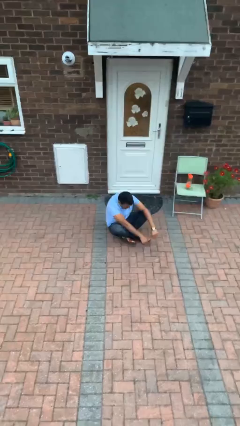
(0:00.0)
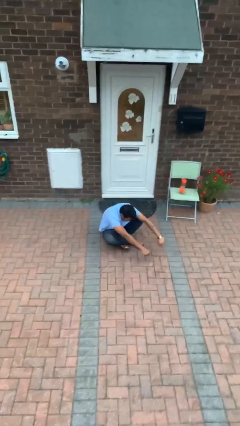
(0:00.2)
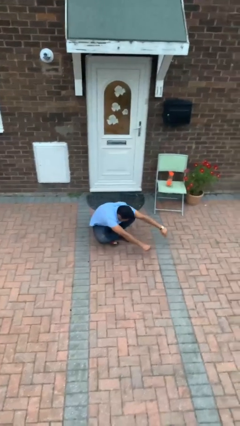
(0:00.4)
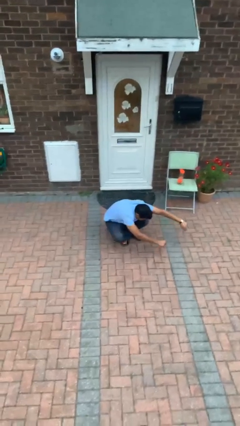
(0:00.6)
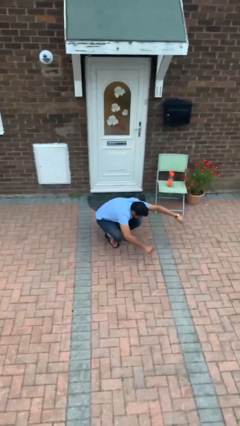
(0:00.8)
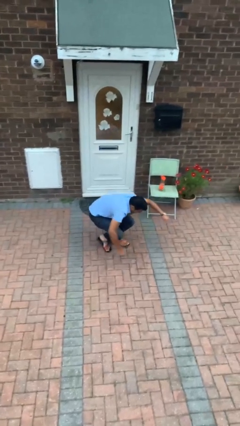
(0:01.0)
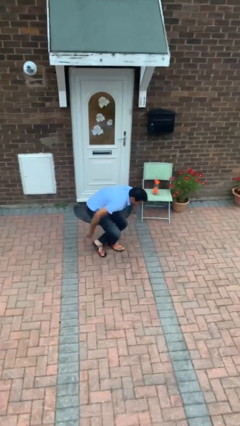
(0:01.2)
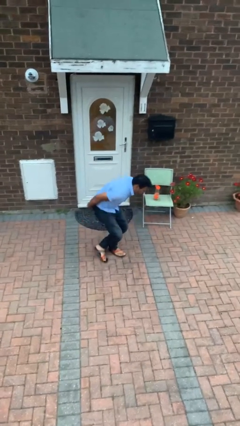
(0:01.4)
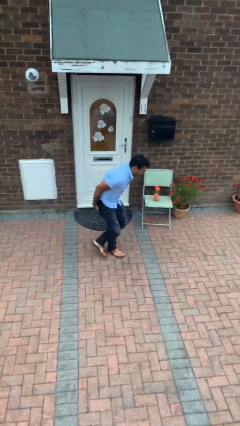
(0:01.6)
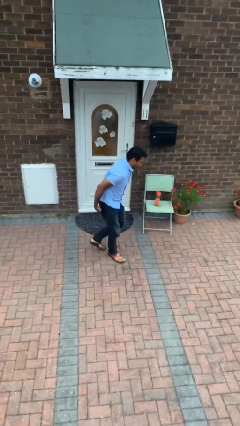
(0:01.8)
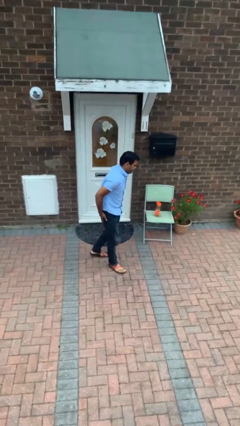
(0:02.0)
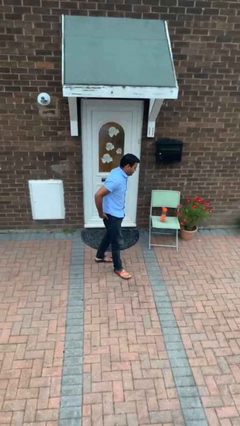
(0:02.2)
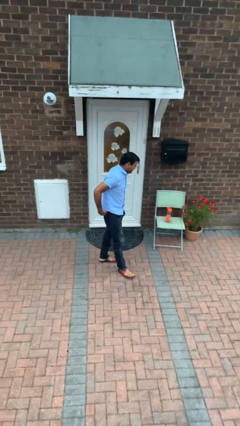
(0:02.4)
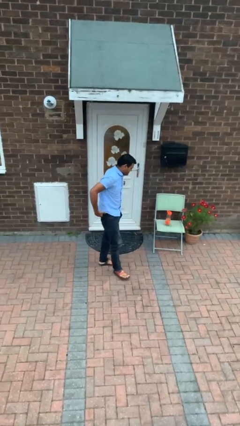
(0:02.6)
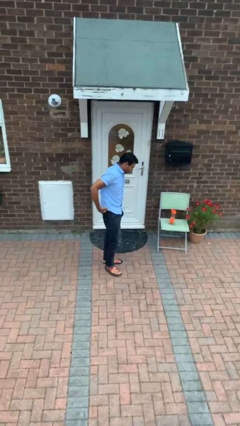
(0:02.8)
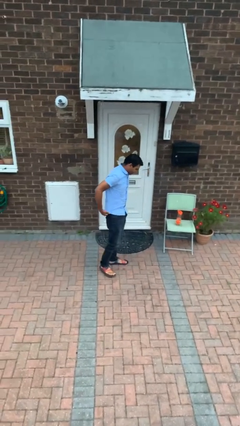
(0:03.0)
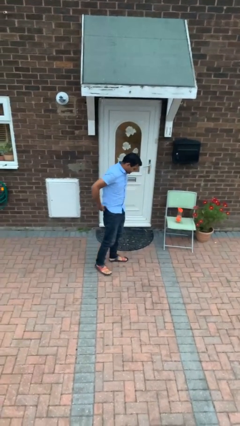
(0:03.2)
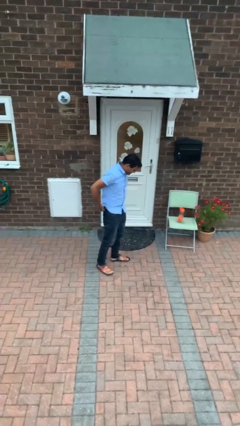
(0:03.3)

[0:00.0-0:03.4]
person stands up from floor

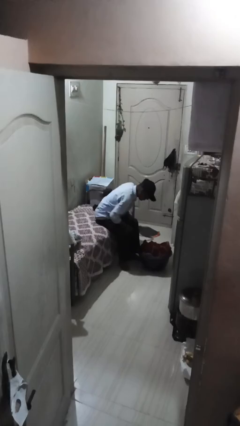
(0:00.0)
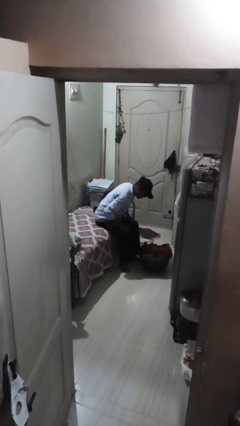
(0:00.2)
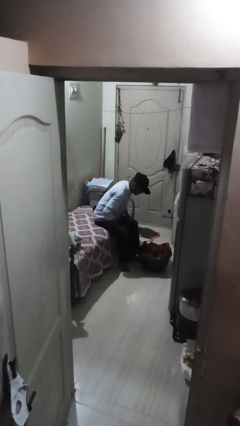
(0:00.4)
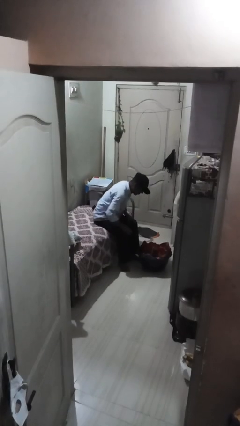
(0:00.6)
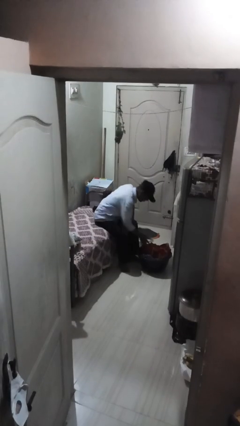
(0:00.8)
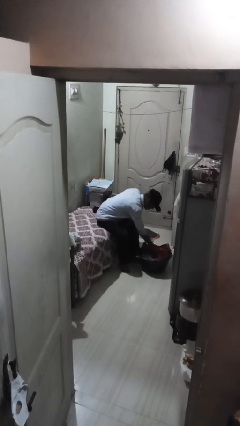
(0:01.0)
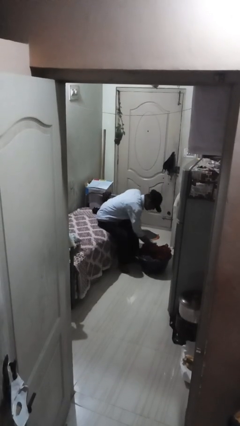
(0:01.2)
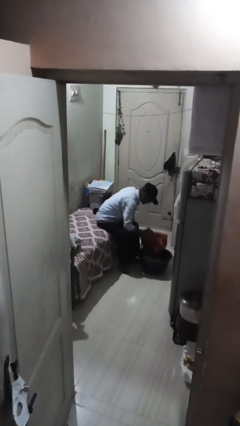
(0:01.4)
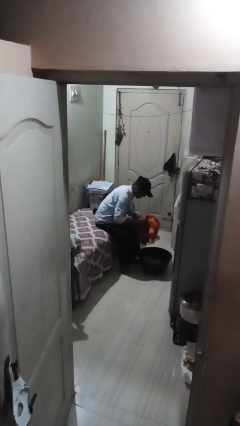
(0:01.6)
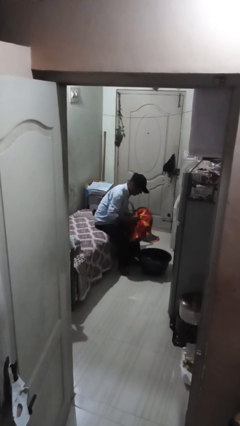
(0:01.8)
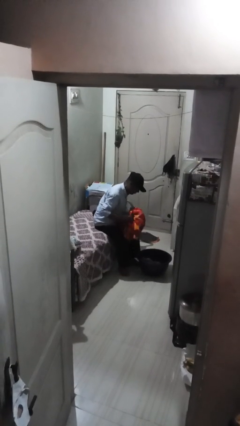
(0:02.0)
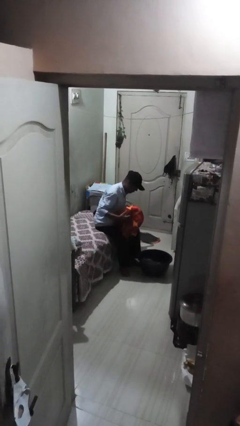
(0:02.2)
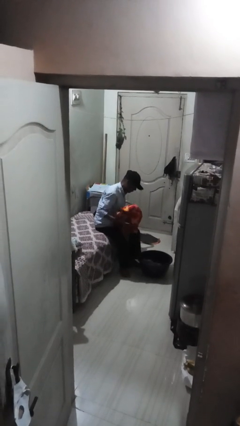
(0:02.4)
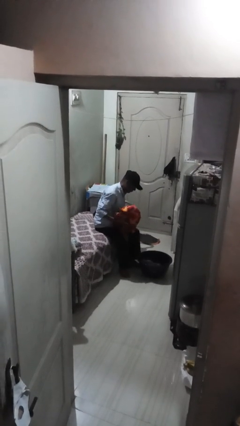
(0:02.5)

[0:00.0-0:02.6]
person takes object from basket

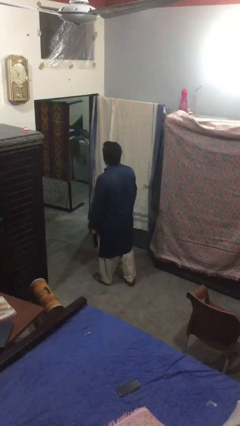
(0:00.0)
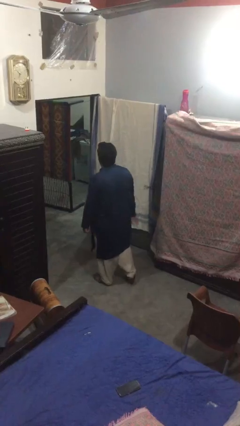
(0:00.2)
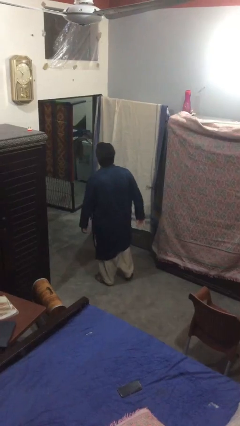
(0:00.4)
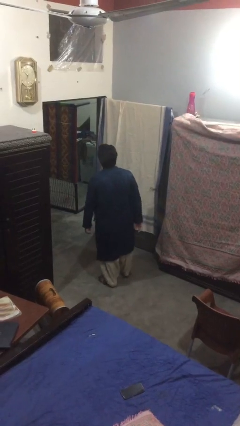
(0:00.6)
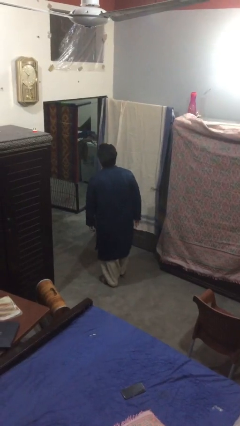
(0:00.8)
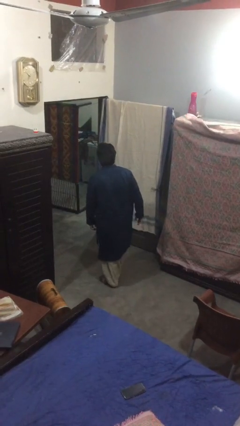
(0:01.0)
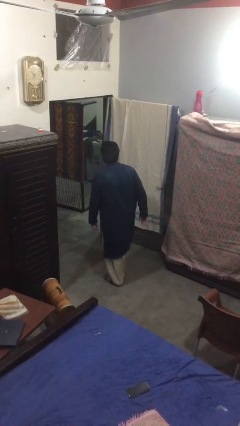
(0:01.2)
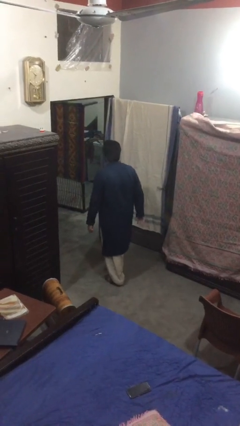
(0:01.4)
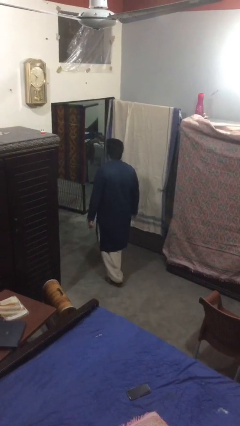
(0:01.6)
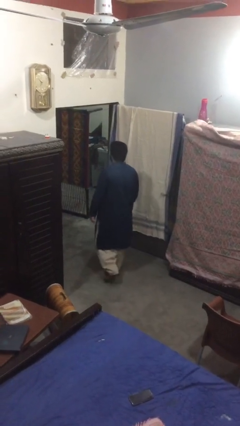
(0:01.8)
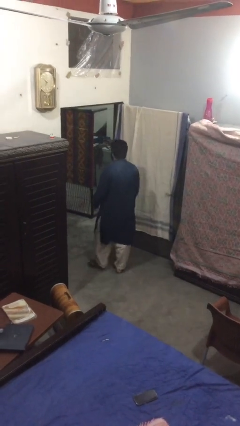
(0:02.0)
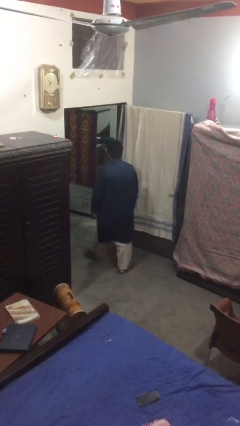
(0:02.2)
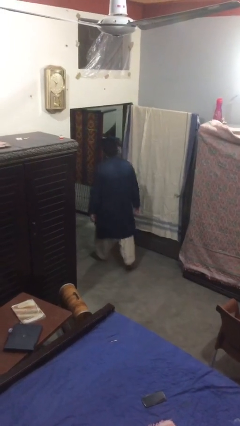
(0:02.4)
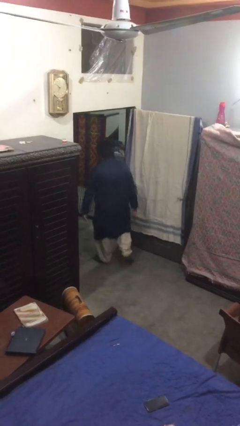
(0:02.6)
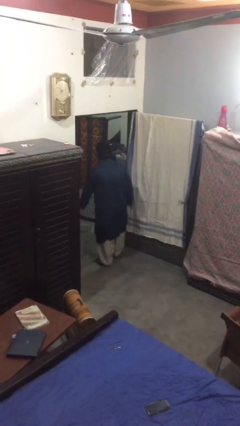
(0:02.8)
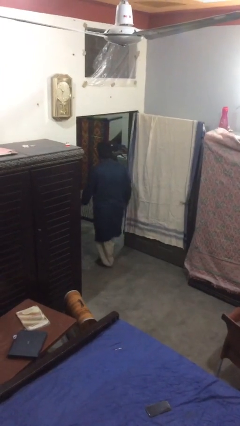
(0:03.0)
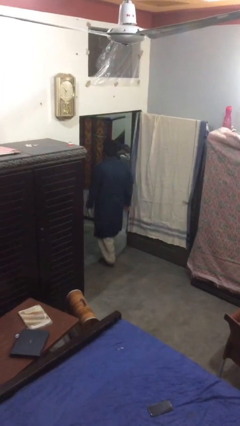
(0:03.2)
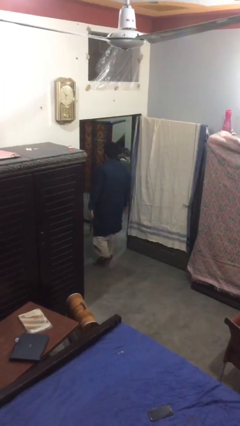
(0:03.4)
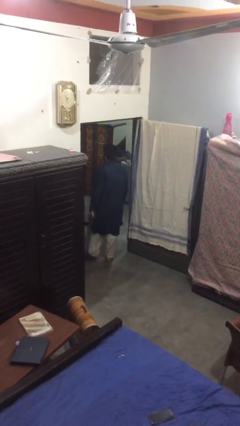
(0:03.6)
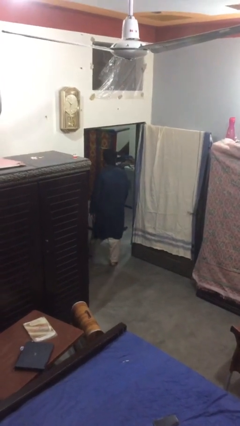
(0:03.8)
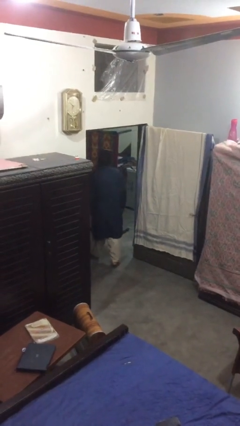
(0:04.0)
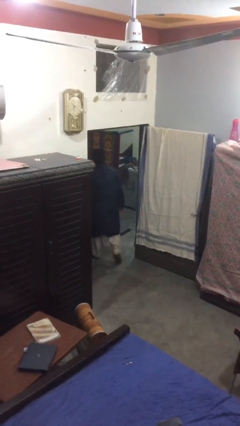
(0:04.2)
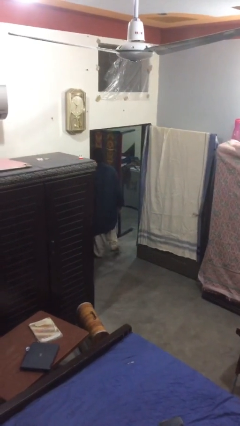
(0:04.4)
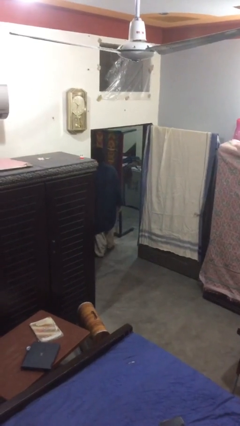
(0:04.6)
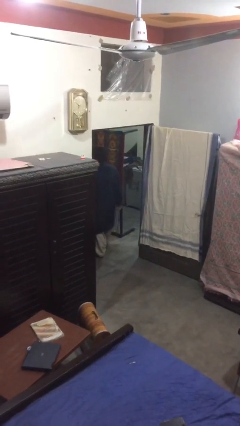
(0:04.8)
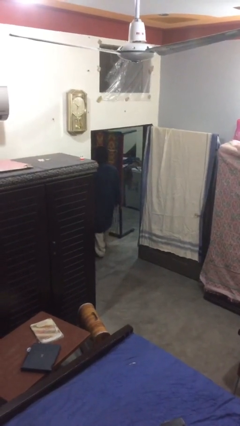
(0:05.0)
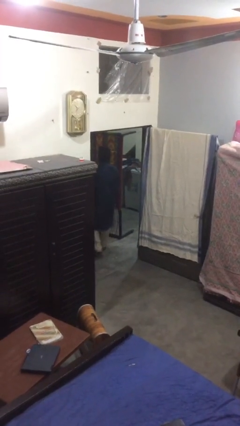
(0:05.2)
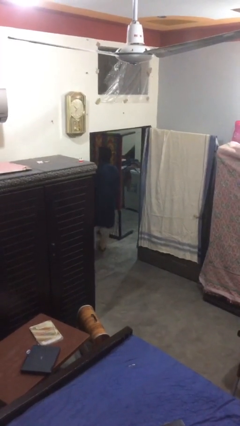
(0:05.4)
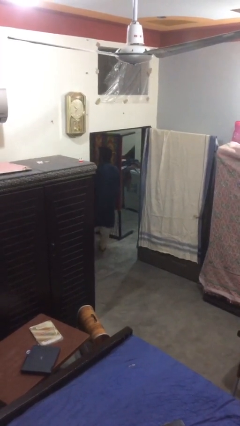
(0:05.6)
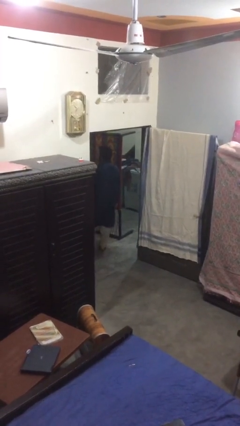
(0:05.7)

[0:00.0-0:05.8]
person exits scene through structure

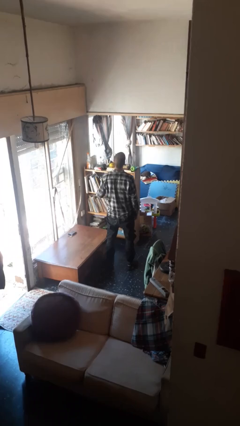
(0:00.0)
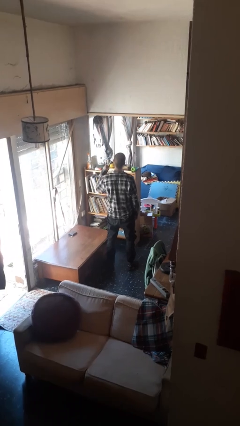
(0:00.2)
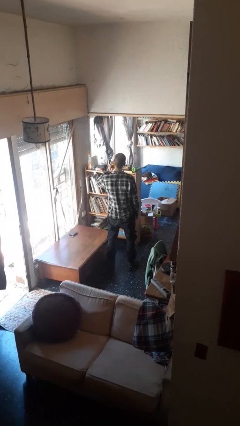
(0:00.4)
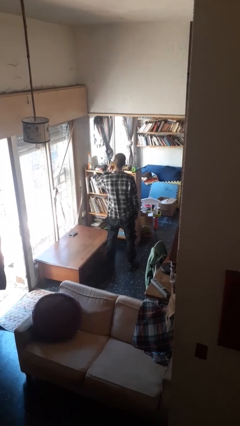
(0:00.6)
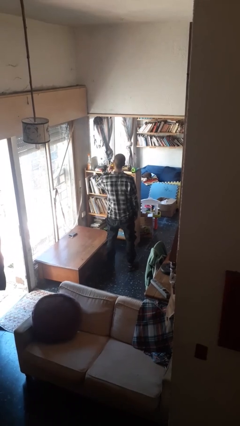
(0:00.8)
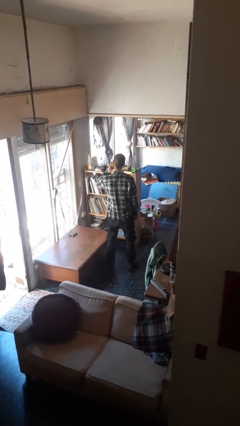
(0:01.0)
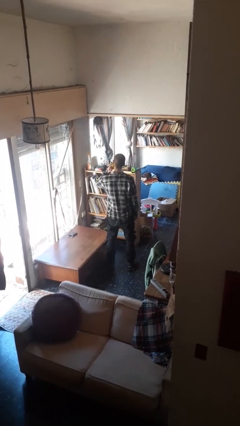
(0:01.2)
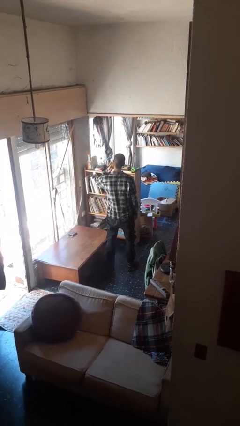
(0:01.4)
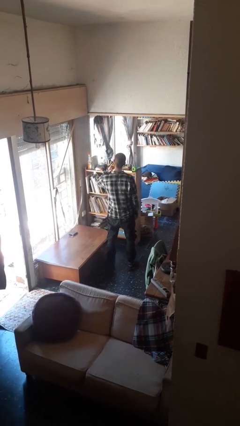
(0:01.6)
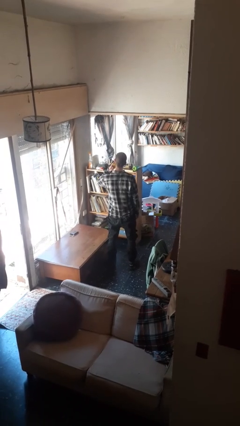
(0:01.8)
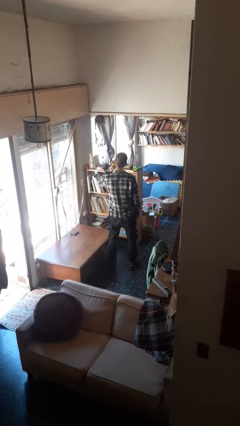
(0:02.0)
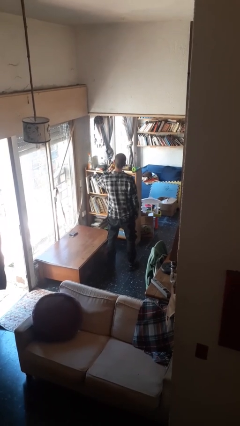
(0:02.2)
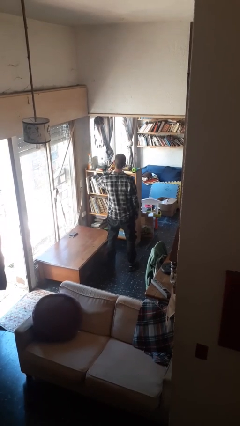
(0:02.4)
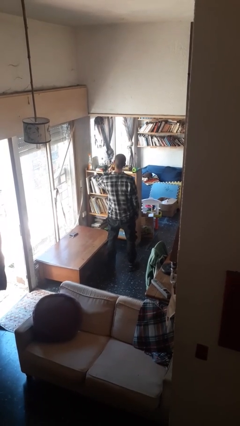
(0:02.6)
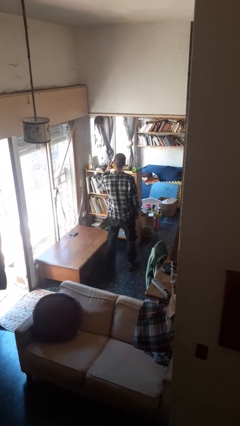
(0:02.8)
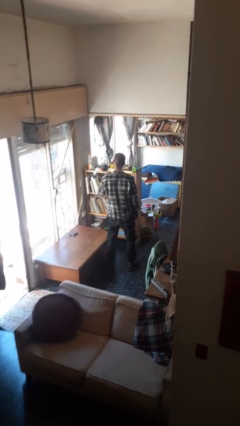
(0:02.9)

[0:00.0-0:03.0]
person gestures listen closely

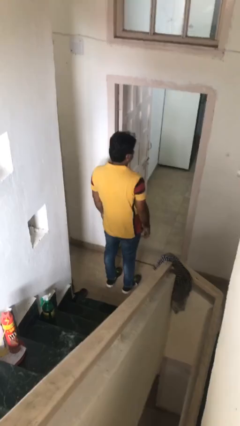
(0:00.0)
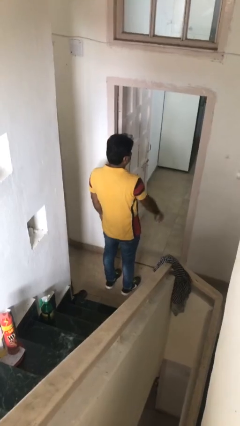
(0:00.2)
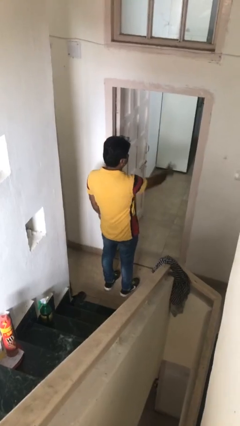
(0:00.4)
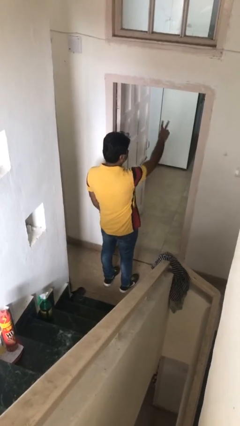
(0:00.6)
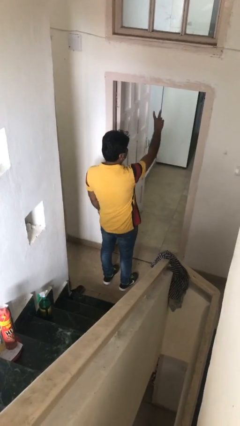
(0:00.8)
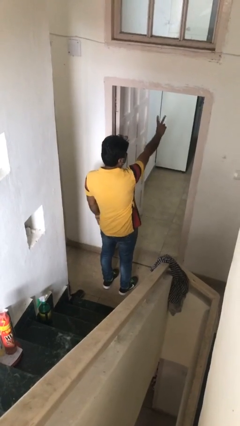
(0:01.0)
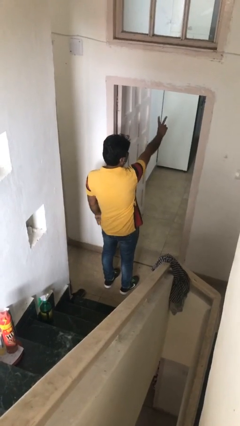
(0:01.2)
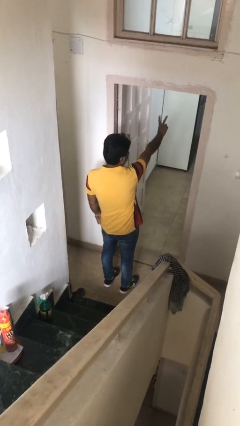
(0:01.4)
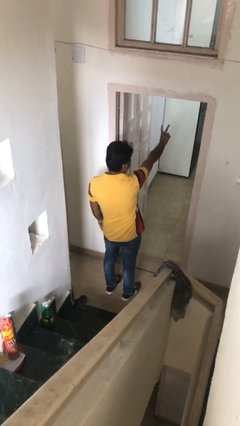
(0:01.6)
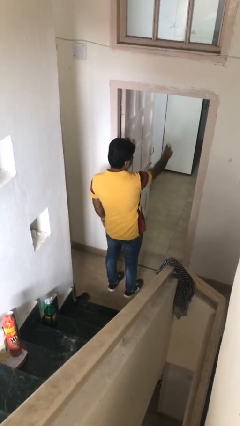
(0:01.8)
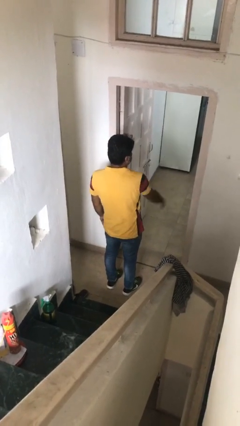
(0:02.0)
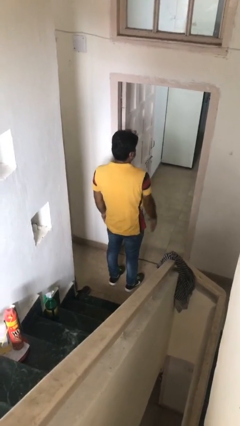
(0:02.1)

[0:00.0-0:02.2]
person gestures peace

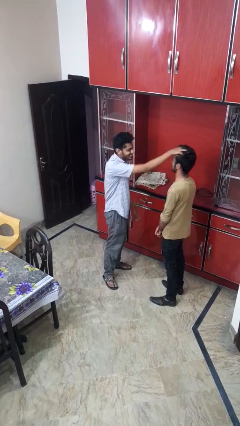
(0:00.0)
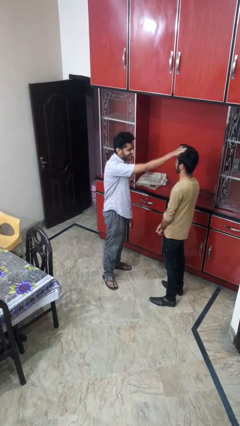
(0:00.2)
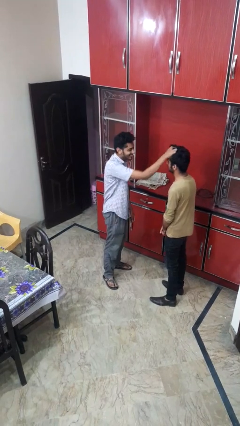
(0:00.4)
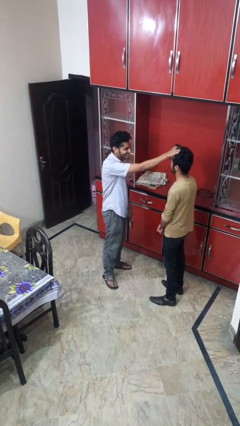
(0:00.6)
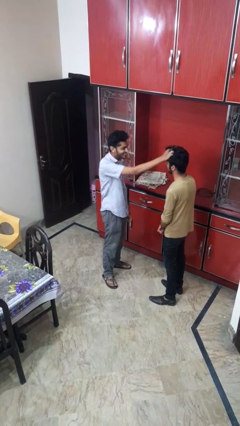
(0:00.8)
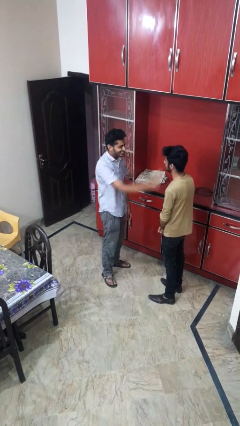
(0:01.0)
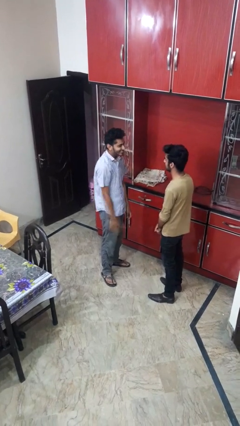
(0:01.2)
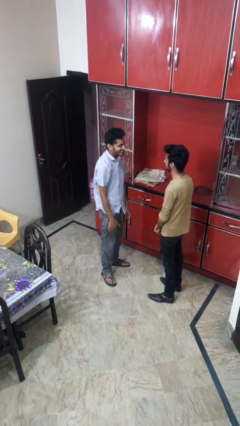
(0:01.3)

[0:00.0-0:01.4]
person grabs person by hair
